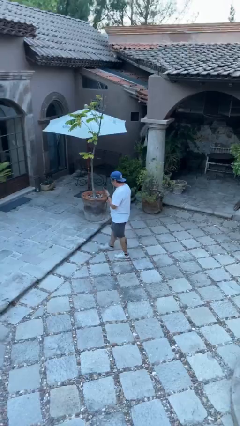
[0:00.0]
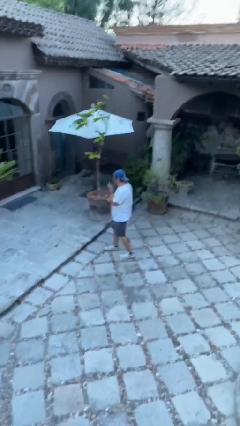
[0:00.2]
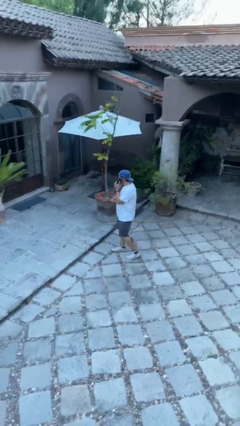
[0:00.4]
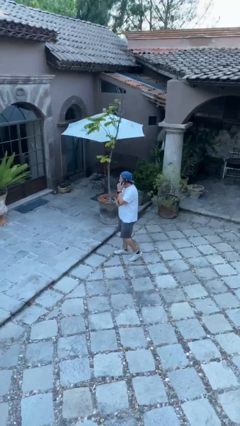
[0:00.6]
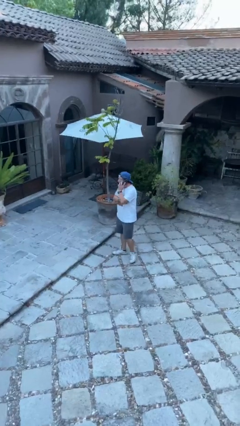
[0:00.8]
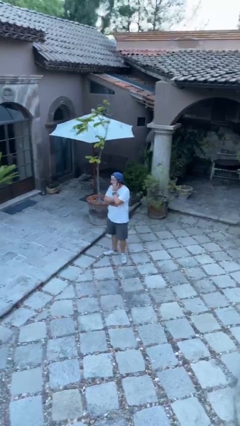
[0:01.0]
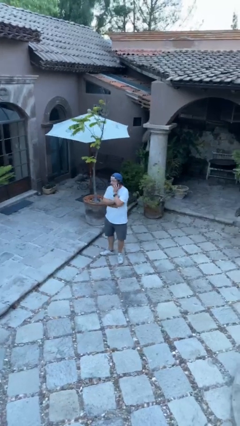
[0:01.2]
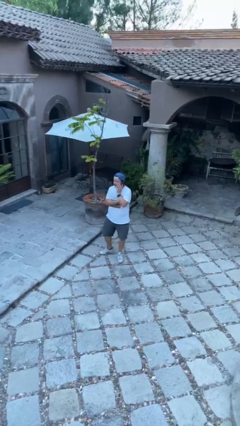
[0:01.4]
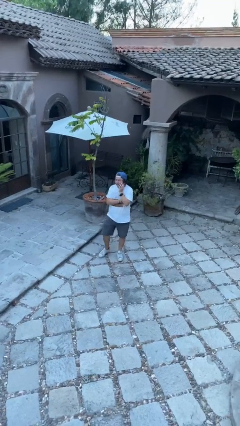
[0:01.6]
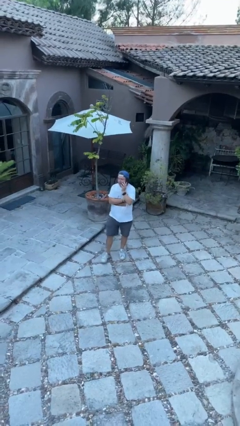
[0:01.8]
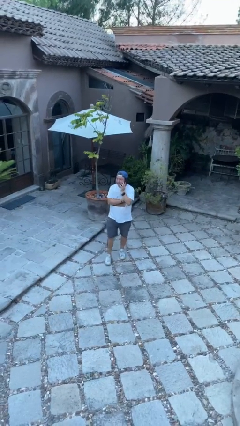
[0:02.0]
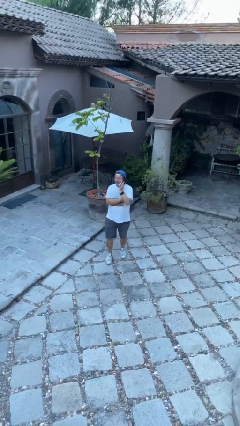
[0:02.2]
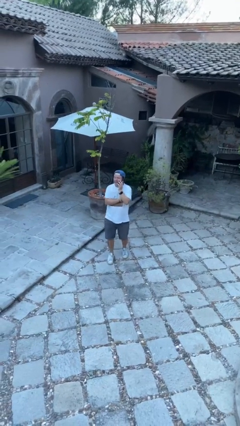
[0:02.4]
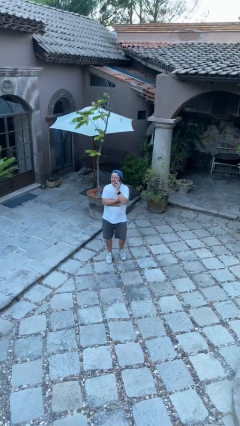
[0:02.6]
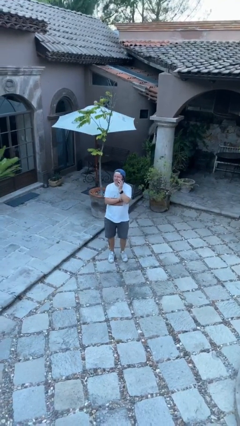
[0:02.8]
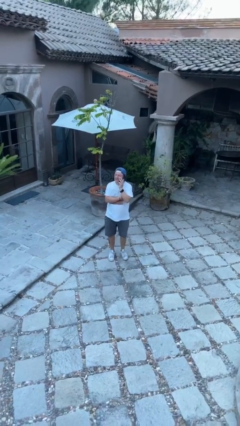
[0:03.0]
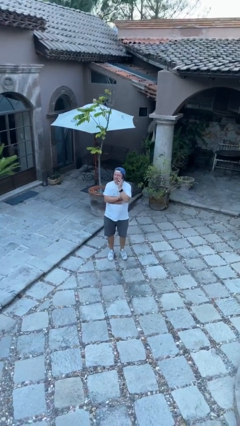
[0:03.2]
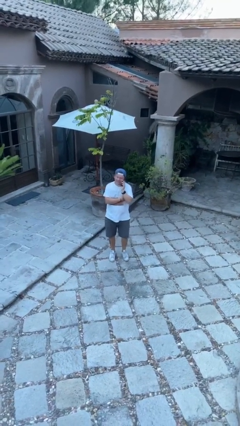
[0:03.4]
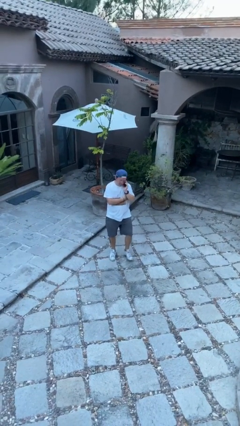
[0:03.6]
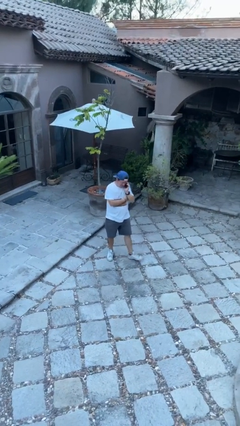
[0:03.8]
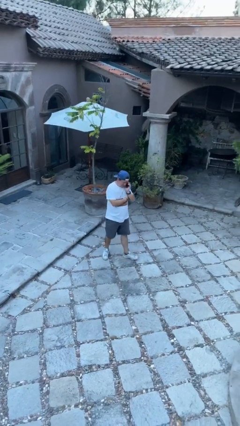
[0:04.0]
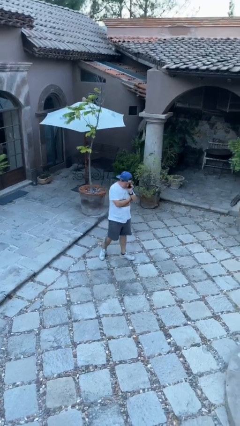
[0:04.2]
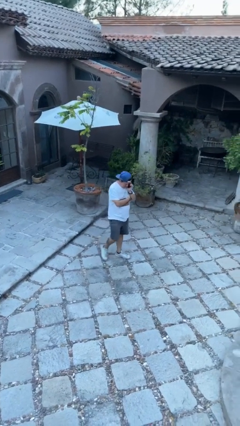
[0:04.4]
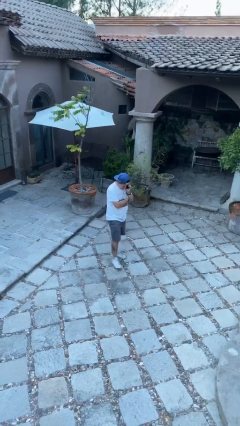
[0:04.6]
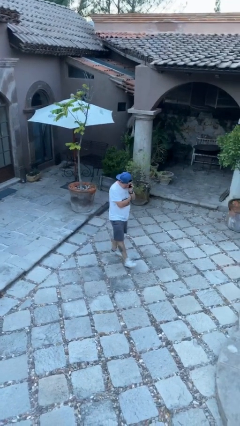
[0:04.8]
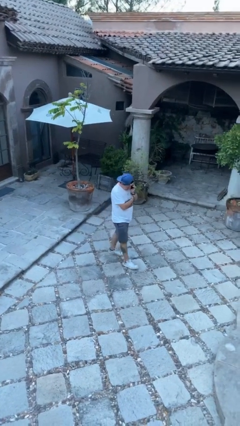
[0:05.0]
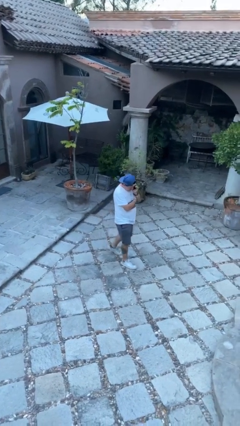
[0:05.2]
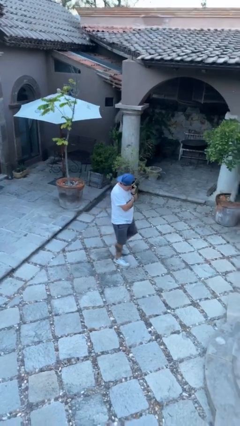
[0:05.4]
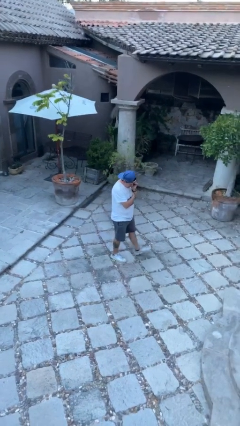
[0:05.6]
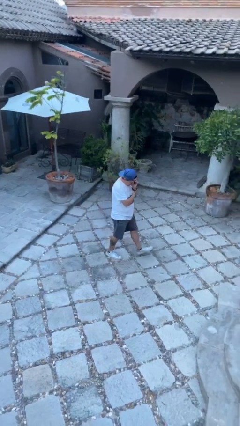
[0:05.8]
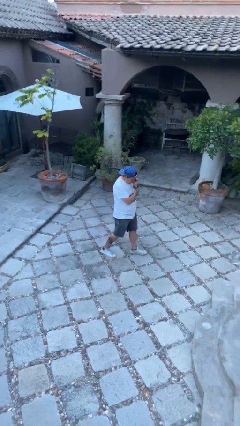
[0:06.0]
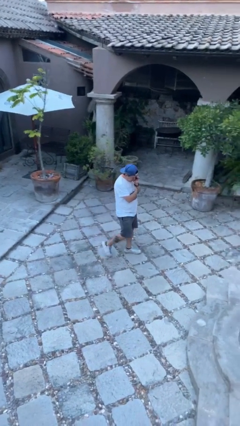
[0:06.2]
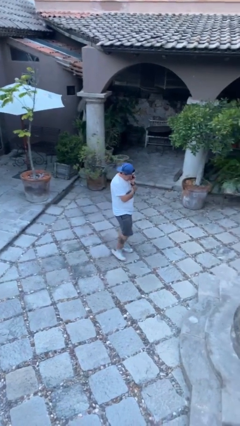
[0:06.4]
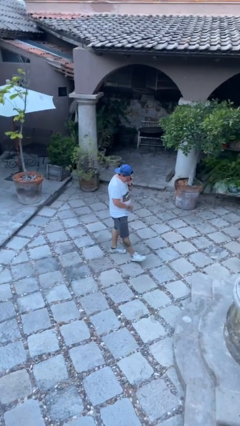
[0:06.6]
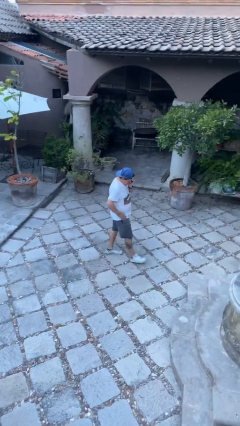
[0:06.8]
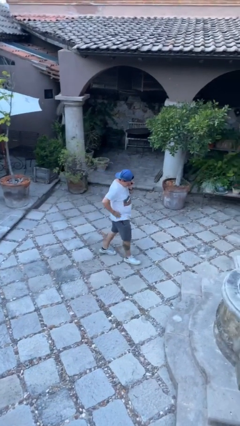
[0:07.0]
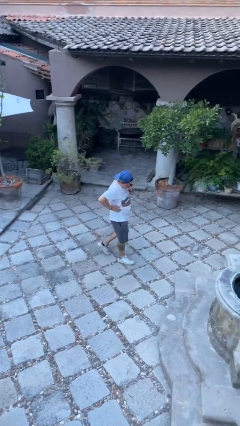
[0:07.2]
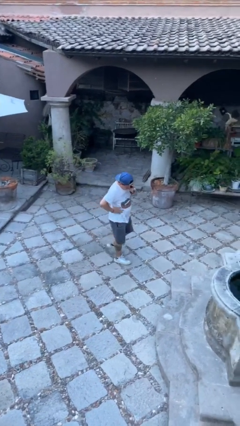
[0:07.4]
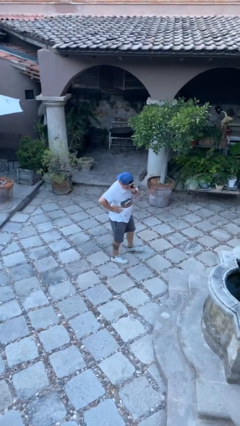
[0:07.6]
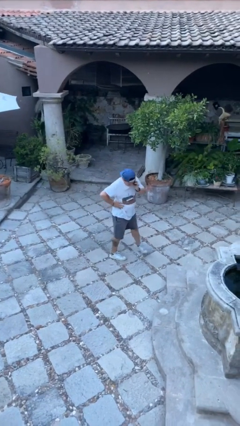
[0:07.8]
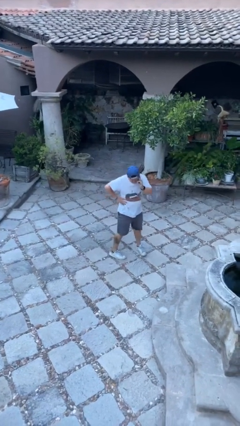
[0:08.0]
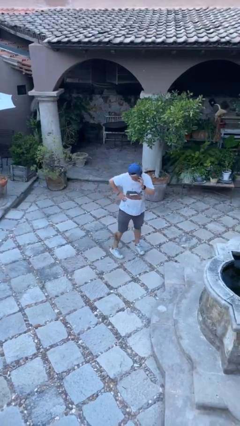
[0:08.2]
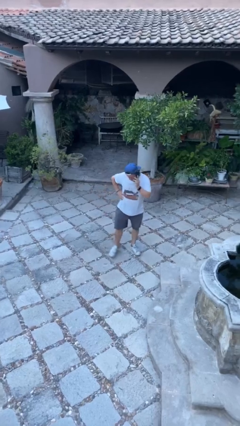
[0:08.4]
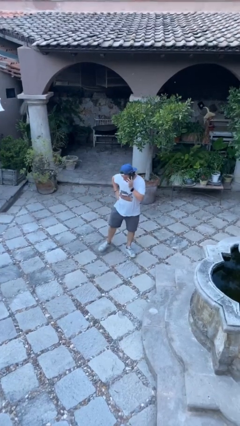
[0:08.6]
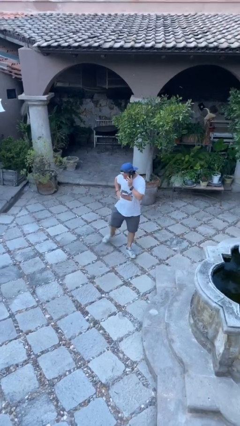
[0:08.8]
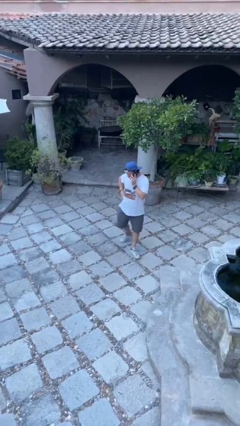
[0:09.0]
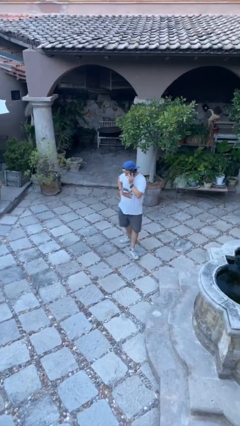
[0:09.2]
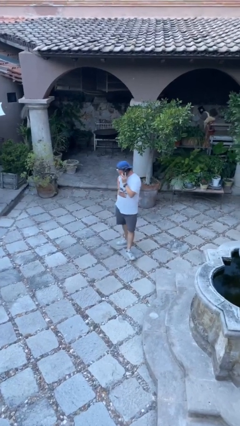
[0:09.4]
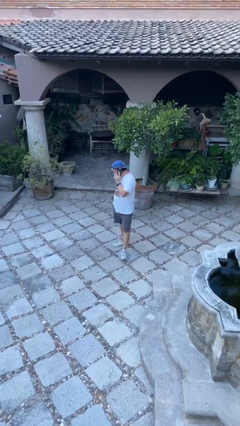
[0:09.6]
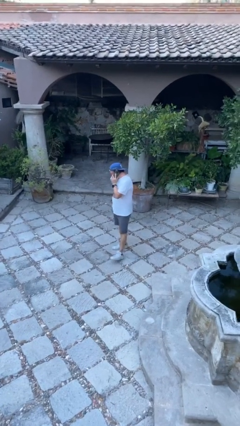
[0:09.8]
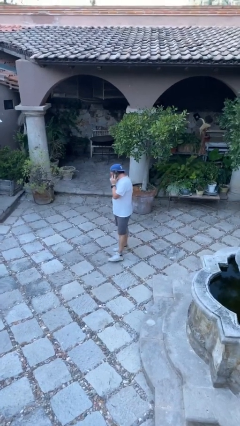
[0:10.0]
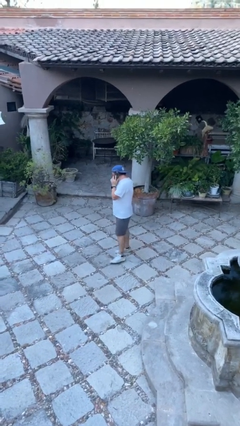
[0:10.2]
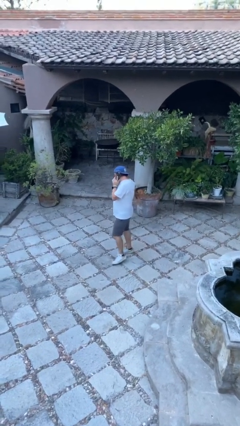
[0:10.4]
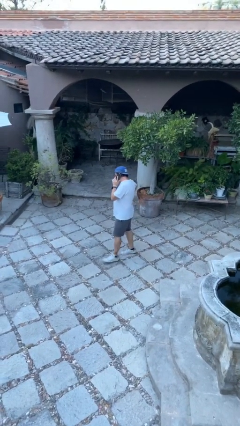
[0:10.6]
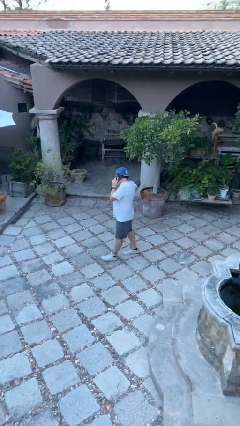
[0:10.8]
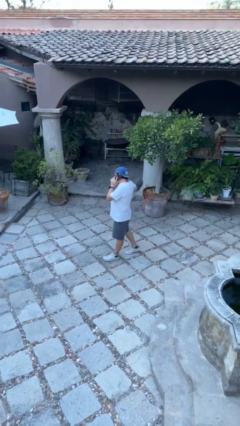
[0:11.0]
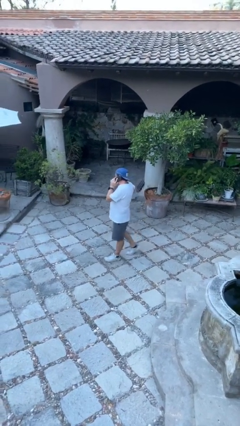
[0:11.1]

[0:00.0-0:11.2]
person talks on phone

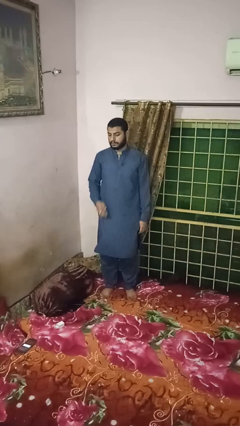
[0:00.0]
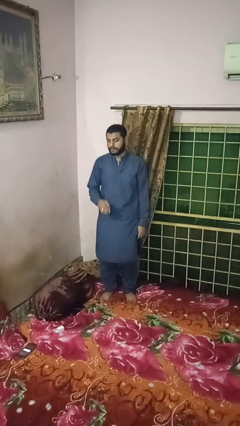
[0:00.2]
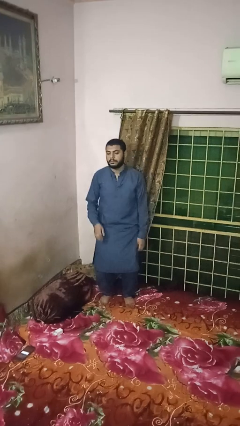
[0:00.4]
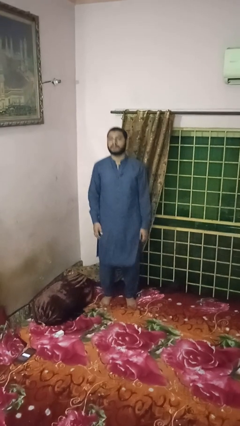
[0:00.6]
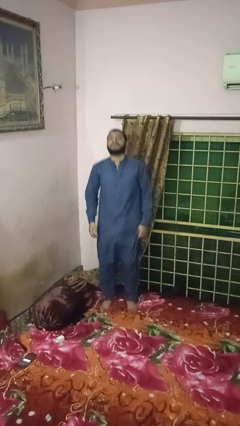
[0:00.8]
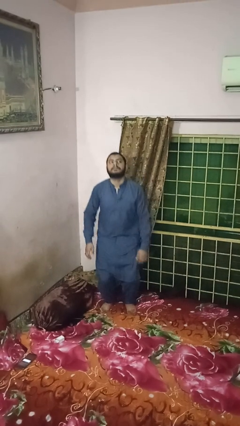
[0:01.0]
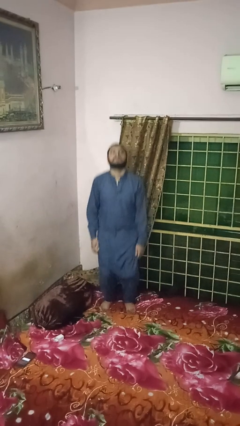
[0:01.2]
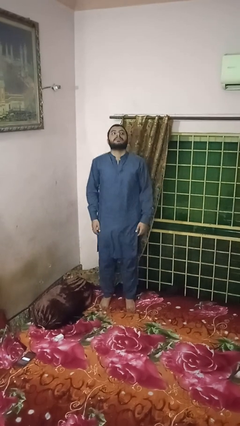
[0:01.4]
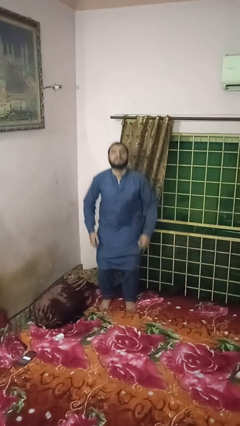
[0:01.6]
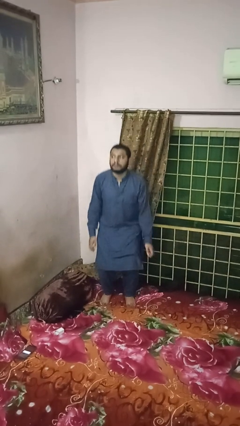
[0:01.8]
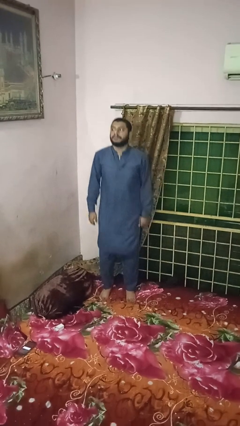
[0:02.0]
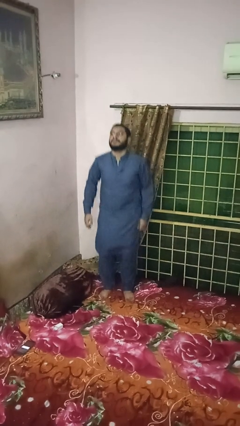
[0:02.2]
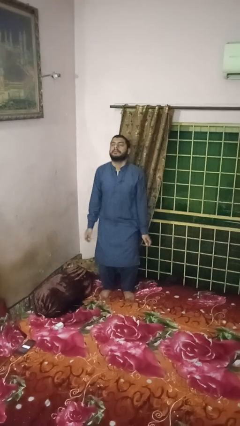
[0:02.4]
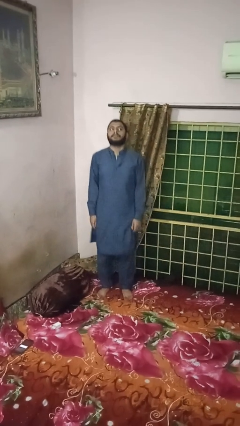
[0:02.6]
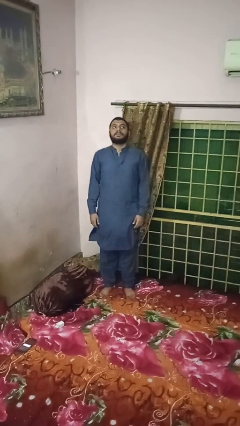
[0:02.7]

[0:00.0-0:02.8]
person jumps on bed

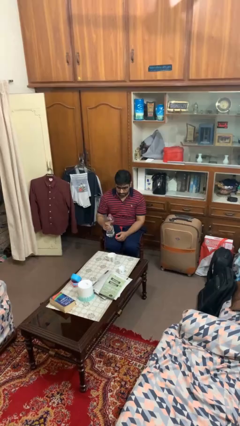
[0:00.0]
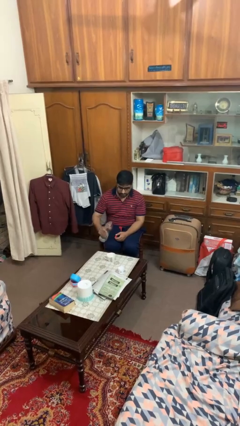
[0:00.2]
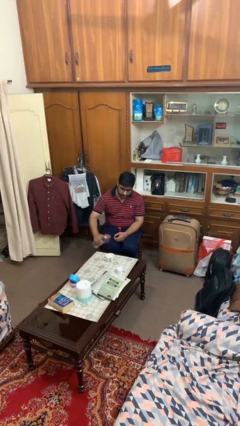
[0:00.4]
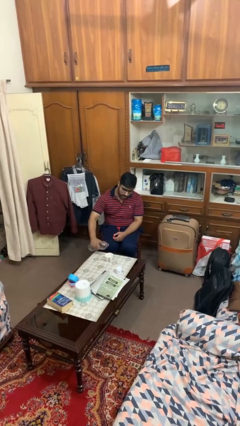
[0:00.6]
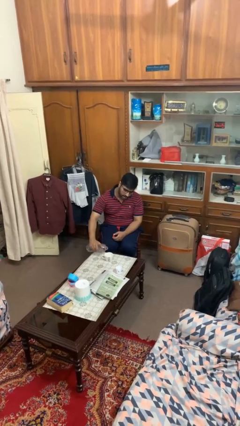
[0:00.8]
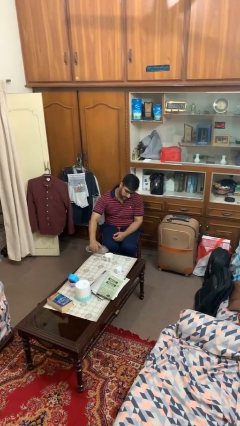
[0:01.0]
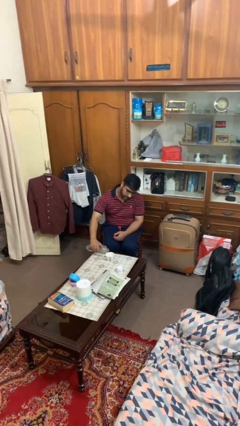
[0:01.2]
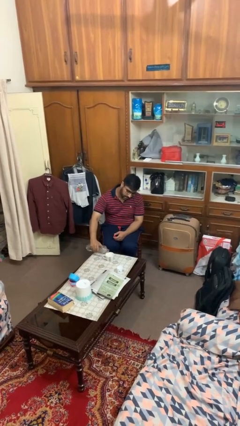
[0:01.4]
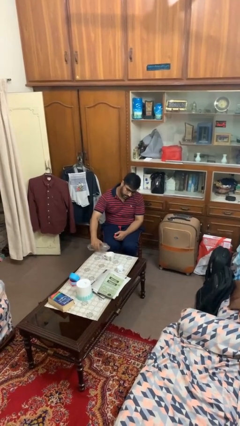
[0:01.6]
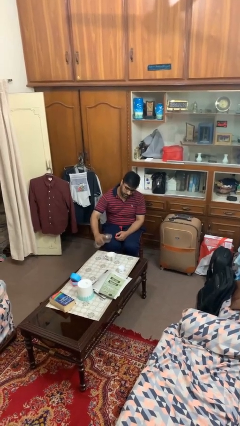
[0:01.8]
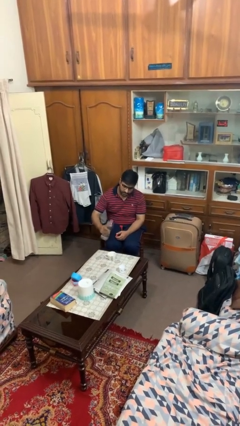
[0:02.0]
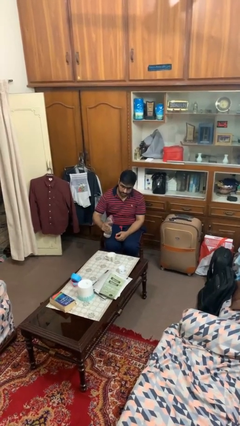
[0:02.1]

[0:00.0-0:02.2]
person pours liquid into cup

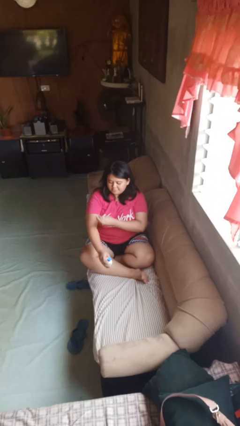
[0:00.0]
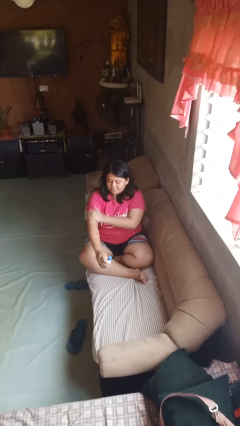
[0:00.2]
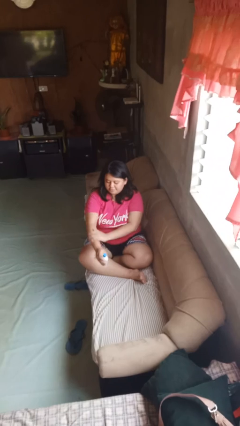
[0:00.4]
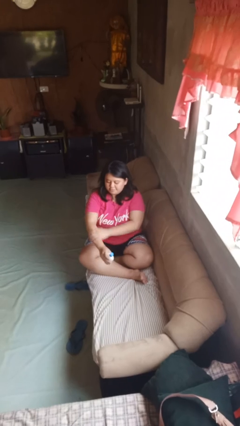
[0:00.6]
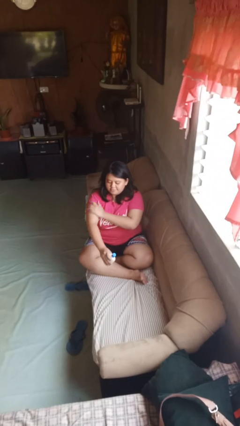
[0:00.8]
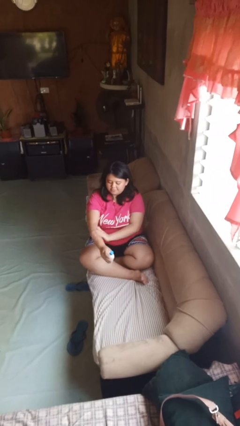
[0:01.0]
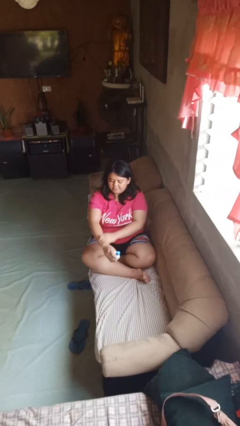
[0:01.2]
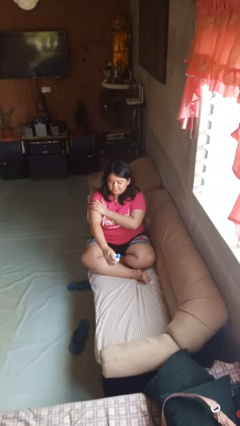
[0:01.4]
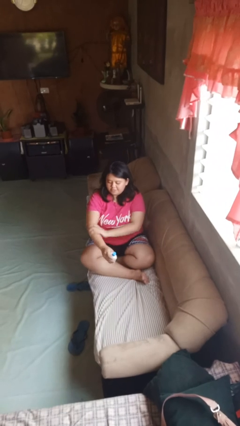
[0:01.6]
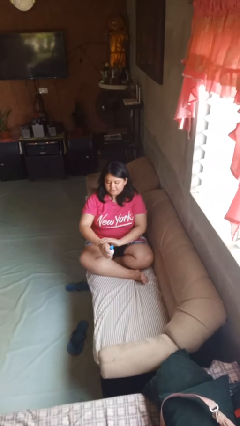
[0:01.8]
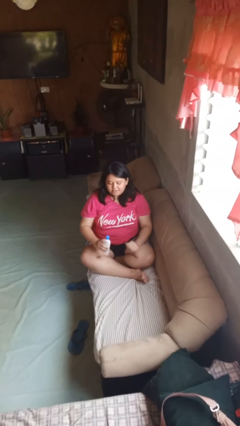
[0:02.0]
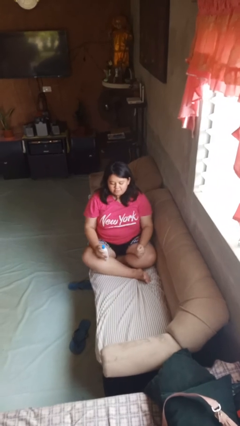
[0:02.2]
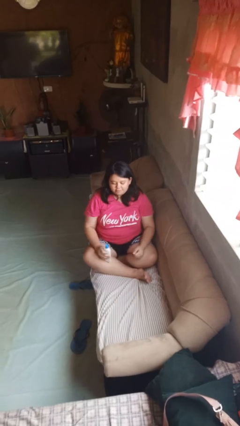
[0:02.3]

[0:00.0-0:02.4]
person applies sunscreen
